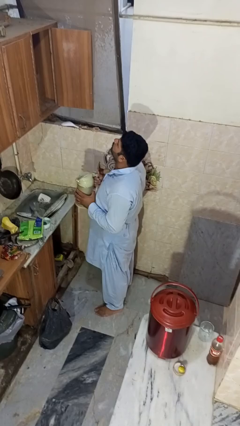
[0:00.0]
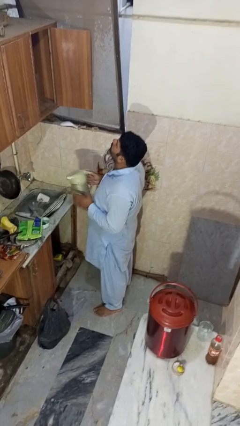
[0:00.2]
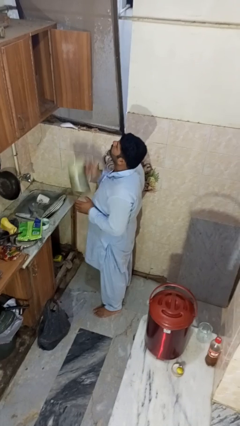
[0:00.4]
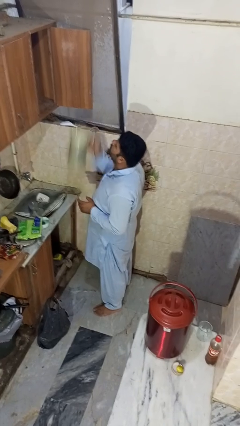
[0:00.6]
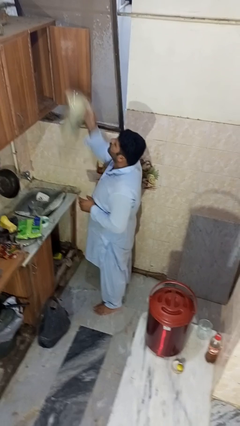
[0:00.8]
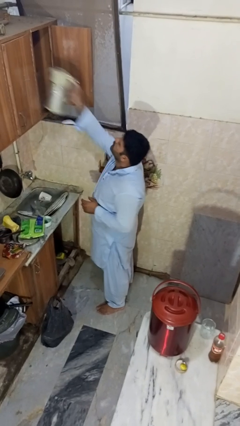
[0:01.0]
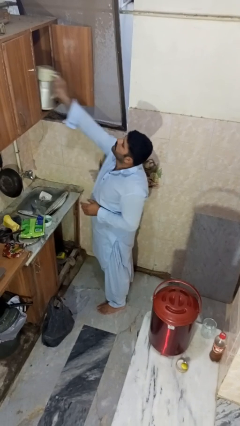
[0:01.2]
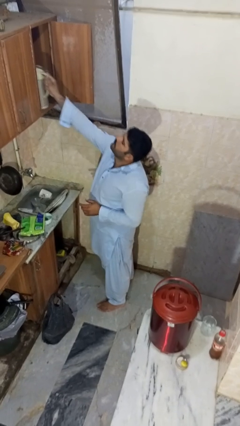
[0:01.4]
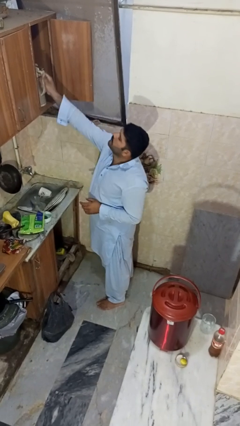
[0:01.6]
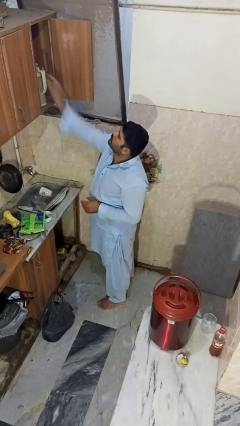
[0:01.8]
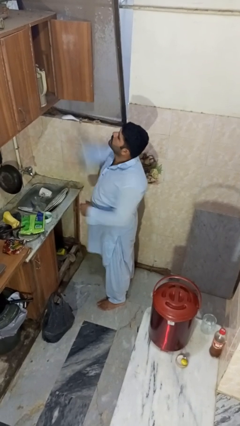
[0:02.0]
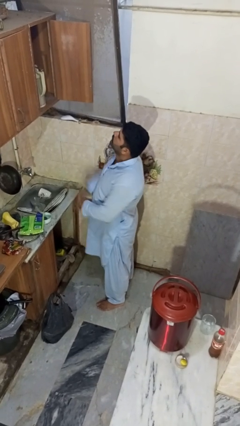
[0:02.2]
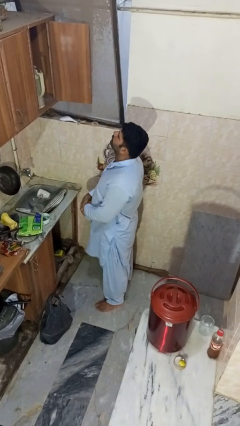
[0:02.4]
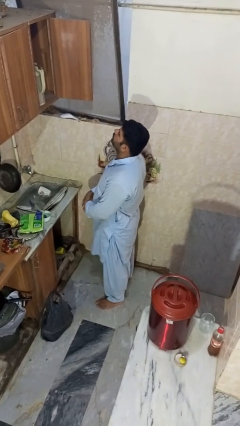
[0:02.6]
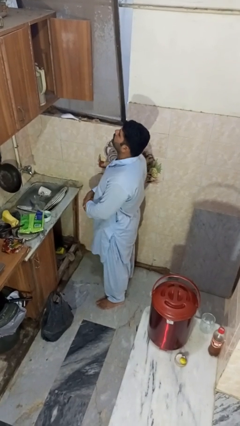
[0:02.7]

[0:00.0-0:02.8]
person puts object in cabinet

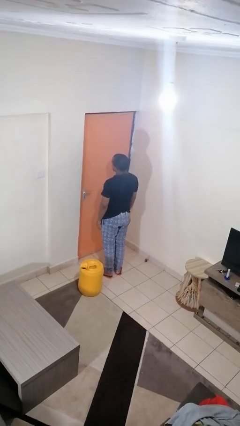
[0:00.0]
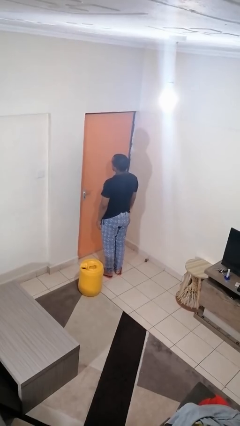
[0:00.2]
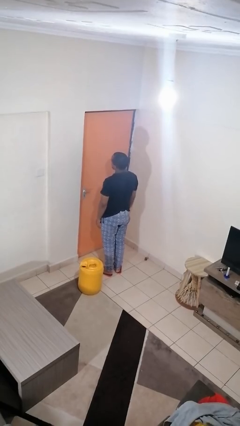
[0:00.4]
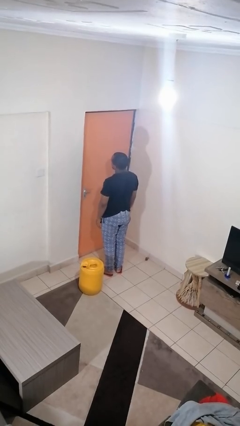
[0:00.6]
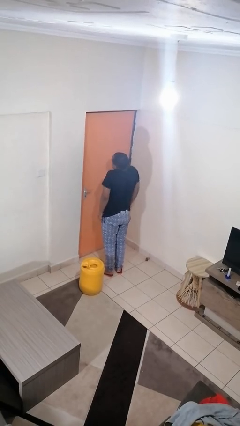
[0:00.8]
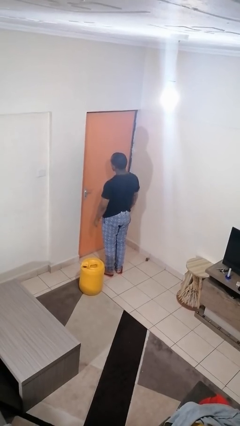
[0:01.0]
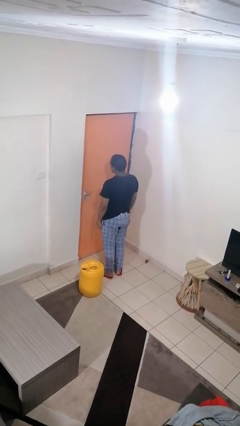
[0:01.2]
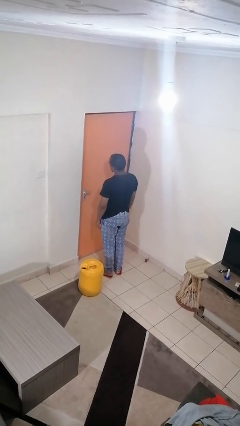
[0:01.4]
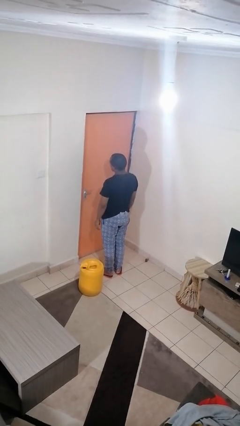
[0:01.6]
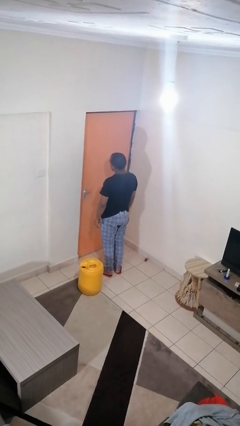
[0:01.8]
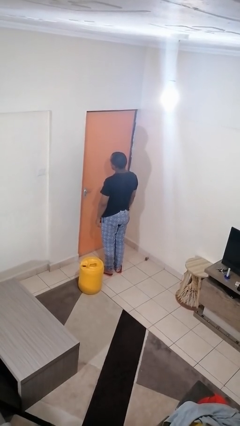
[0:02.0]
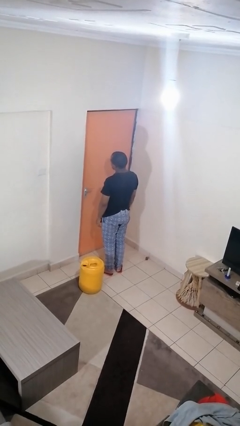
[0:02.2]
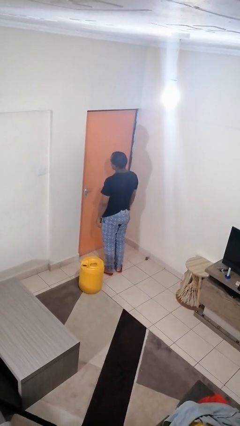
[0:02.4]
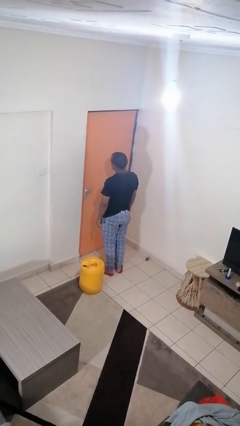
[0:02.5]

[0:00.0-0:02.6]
person shrugs

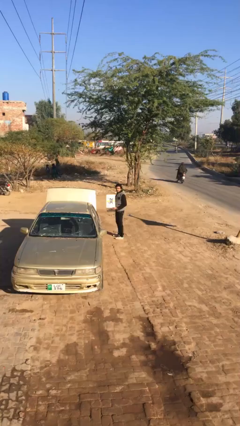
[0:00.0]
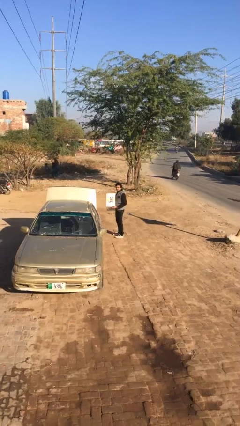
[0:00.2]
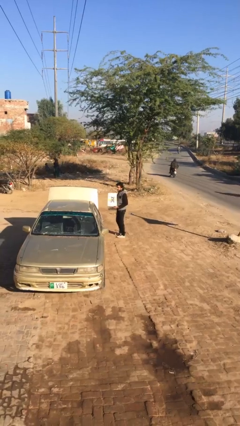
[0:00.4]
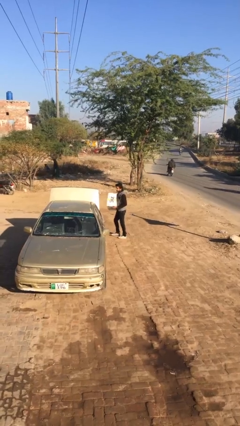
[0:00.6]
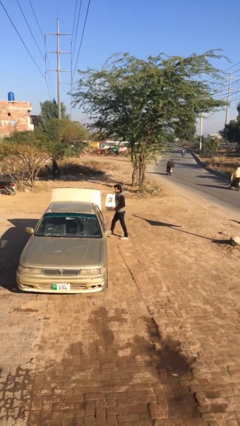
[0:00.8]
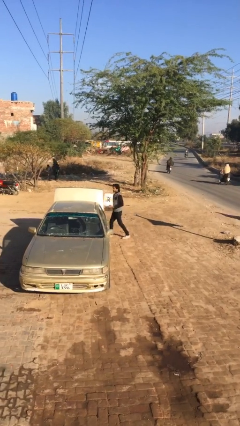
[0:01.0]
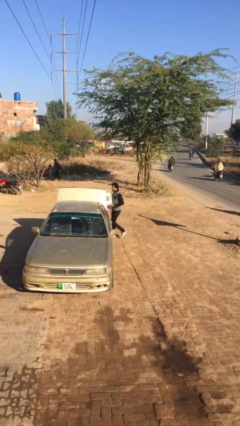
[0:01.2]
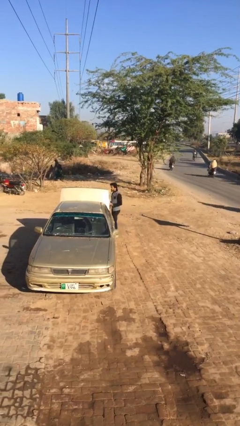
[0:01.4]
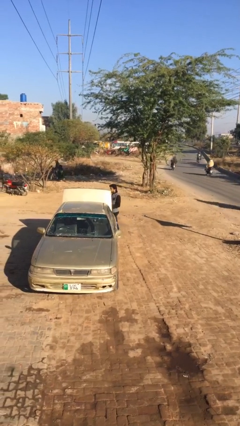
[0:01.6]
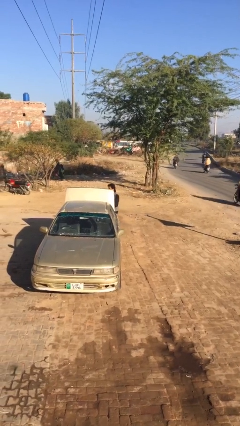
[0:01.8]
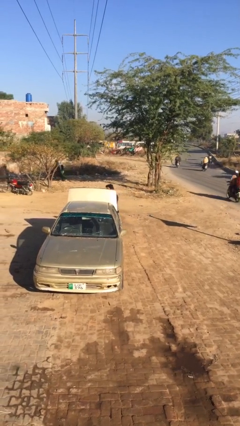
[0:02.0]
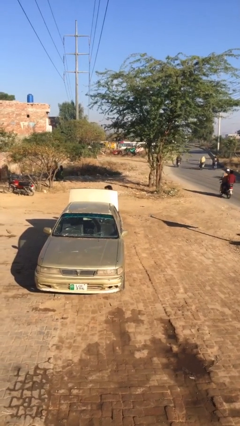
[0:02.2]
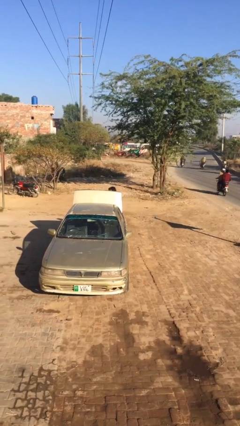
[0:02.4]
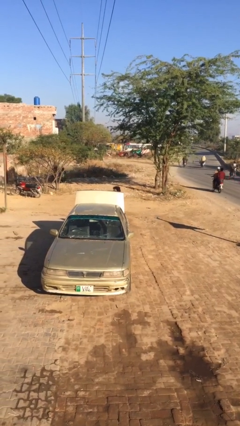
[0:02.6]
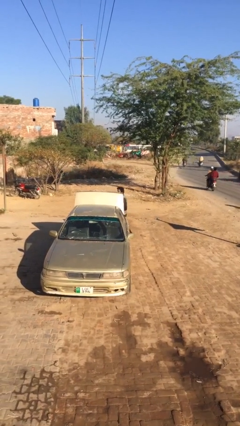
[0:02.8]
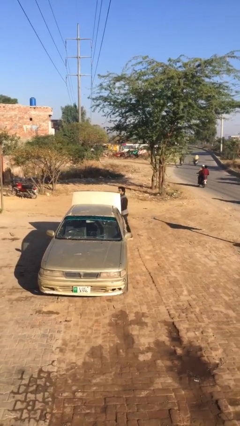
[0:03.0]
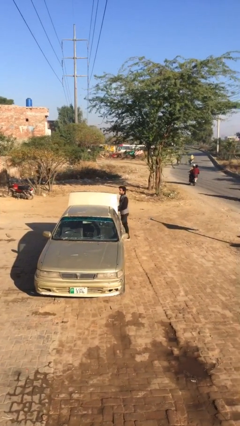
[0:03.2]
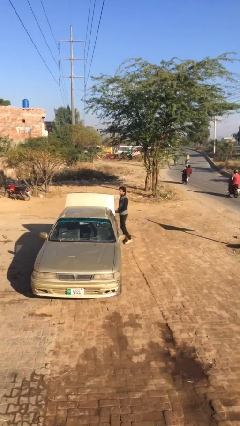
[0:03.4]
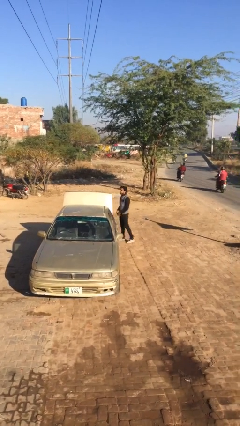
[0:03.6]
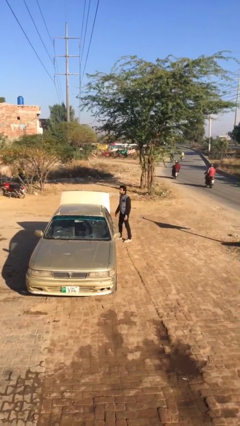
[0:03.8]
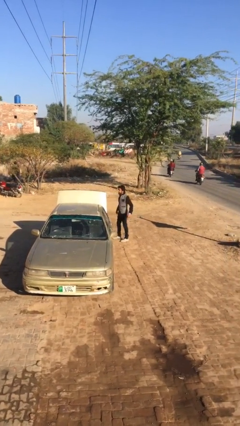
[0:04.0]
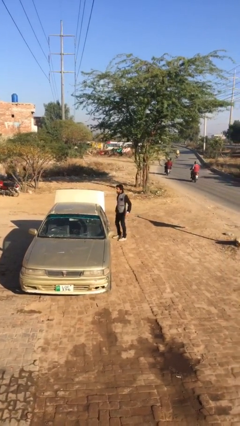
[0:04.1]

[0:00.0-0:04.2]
person loads car

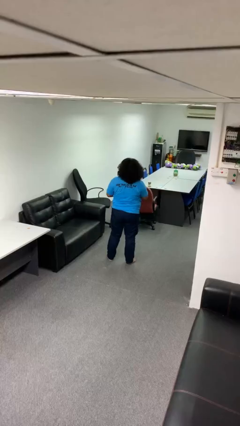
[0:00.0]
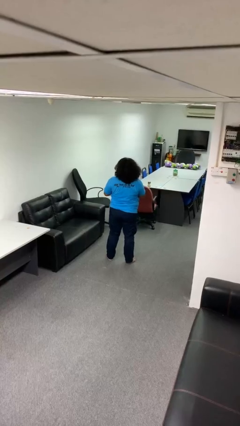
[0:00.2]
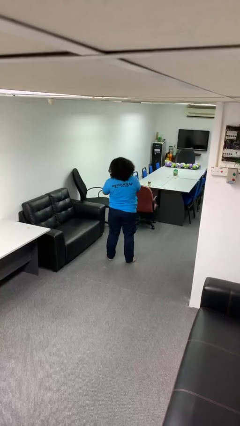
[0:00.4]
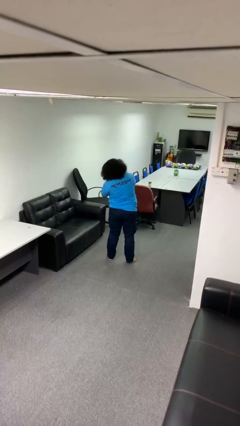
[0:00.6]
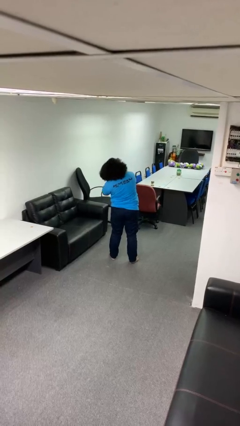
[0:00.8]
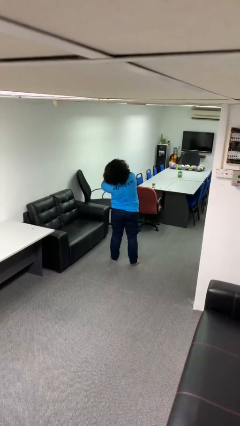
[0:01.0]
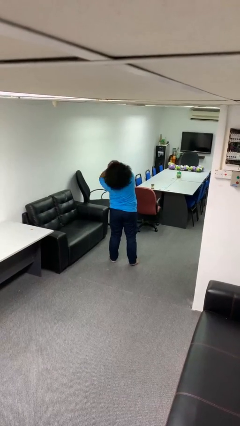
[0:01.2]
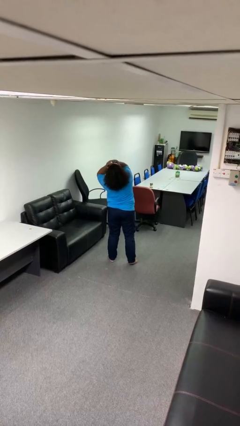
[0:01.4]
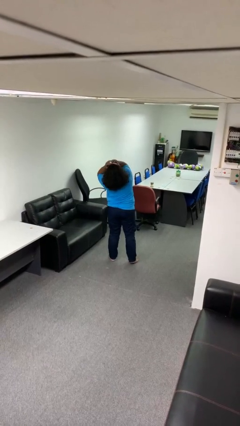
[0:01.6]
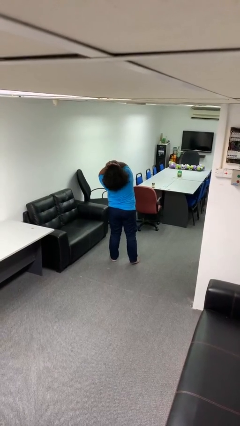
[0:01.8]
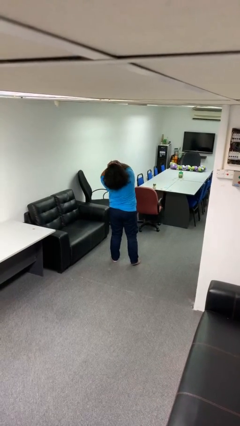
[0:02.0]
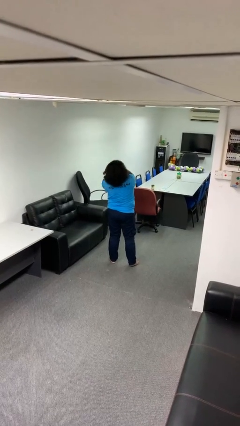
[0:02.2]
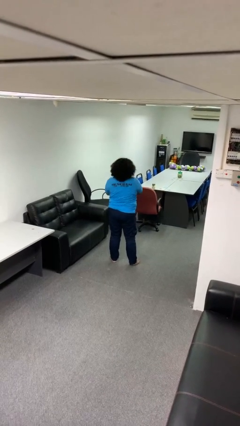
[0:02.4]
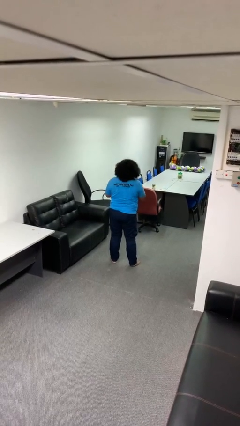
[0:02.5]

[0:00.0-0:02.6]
person covers face with hands

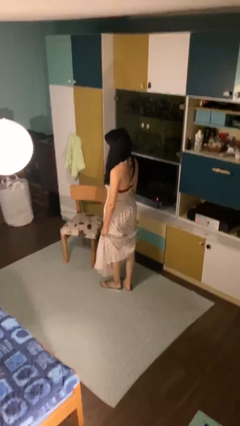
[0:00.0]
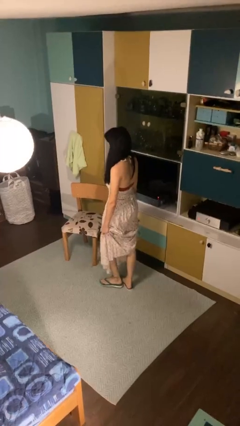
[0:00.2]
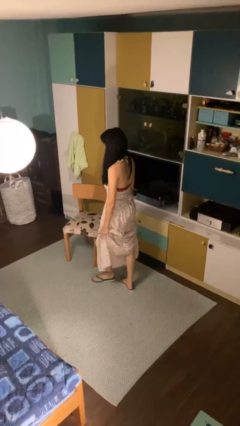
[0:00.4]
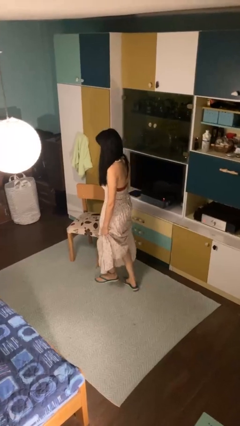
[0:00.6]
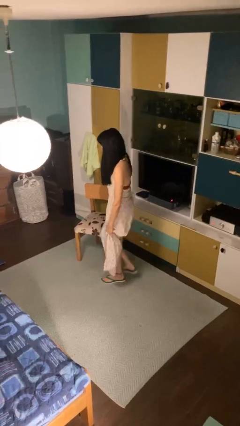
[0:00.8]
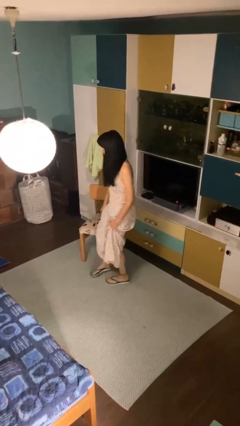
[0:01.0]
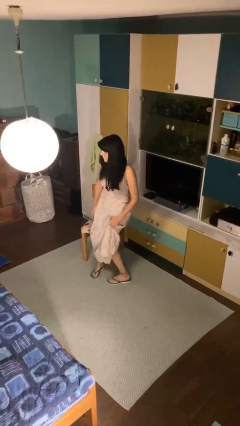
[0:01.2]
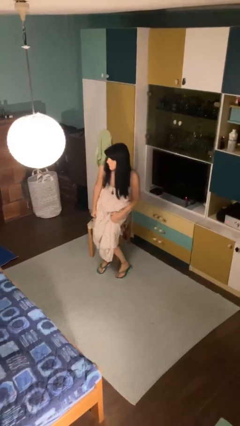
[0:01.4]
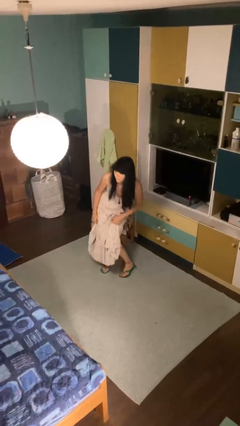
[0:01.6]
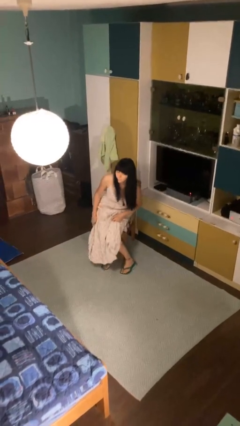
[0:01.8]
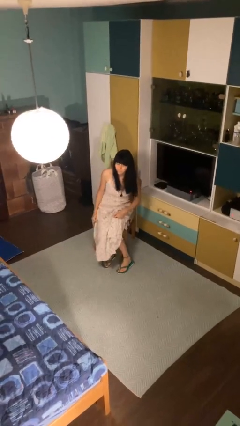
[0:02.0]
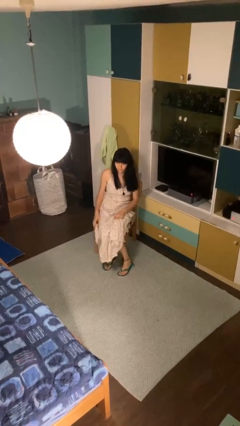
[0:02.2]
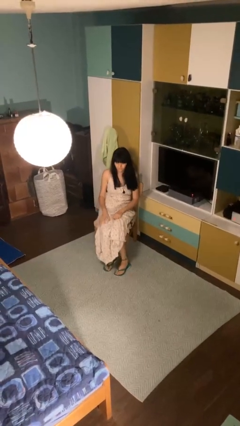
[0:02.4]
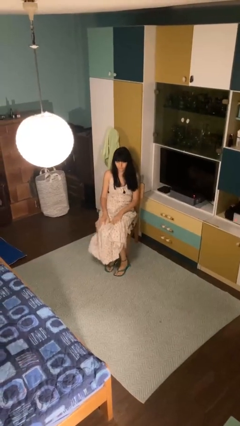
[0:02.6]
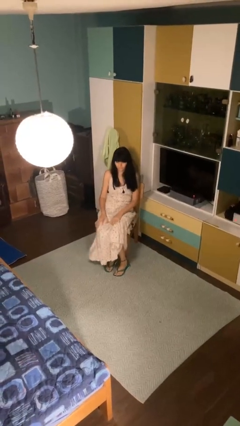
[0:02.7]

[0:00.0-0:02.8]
person sits down

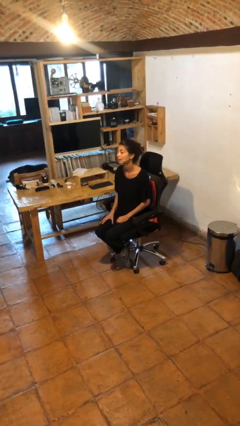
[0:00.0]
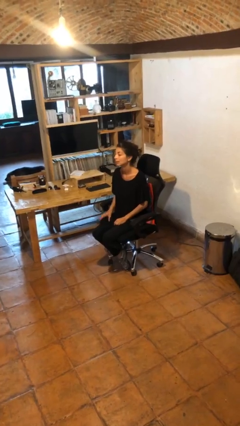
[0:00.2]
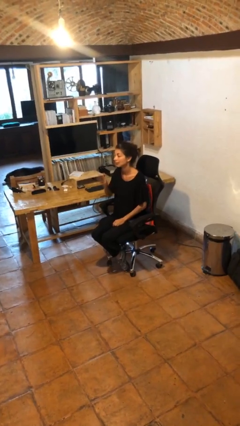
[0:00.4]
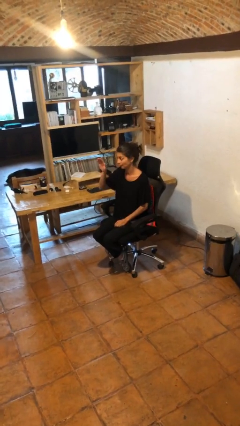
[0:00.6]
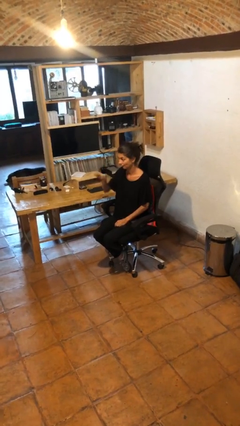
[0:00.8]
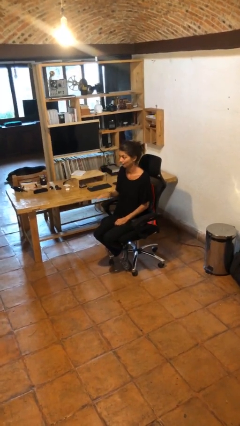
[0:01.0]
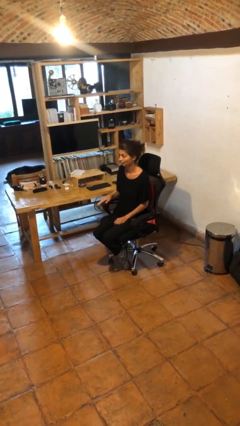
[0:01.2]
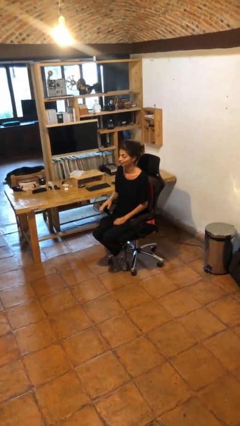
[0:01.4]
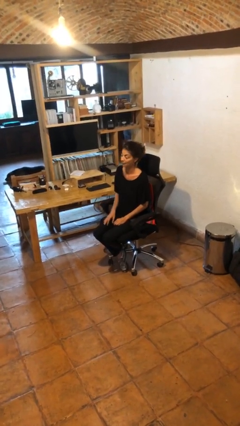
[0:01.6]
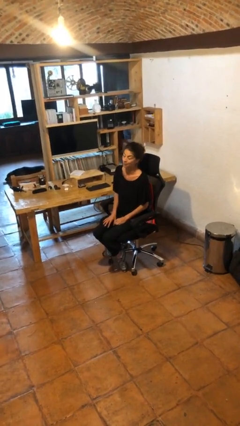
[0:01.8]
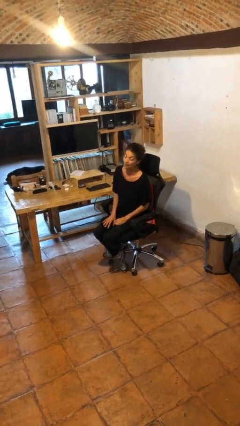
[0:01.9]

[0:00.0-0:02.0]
person gestures swipe down
